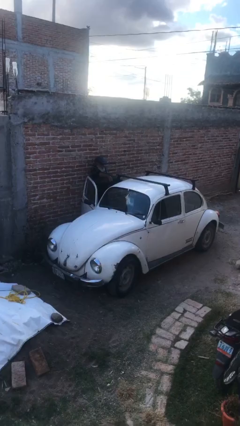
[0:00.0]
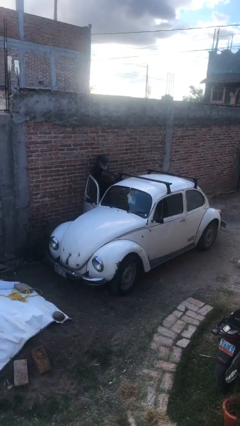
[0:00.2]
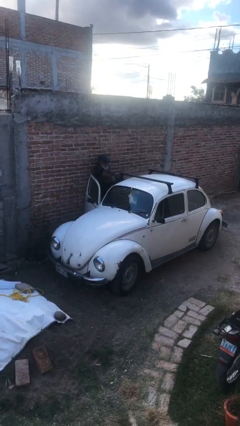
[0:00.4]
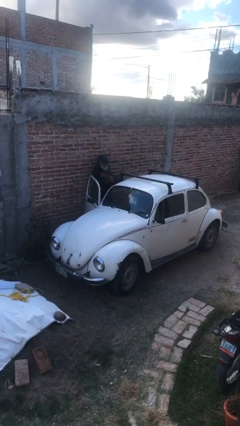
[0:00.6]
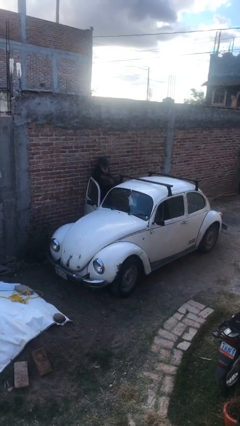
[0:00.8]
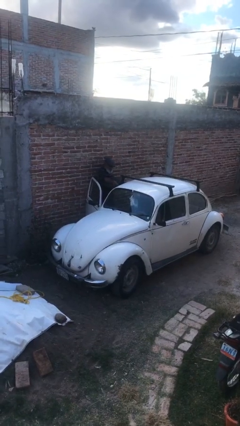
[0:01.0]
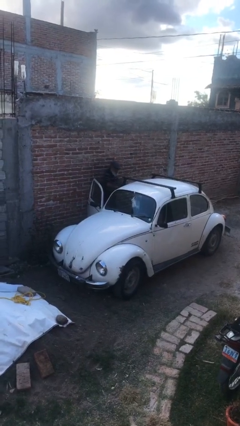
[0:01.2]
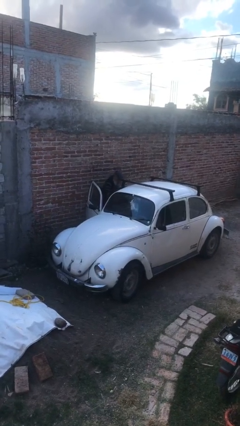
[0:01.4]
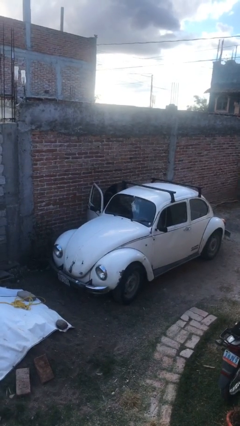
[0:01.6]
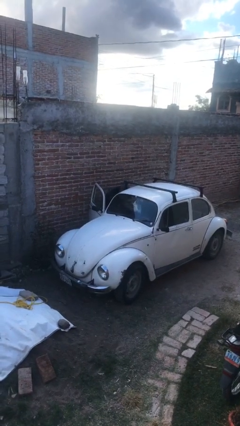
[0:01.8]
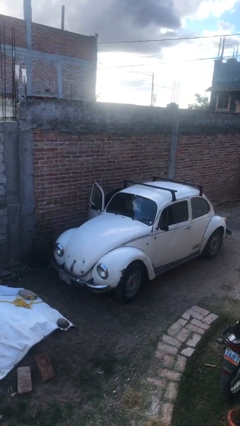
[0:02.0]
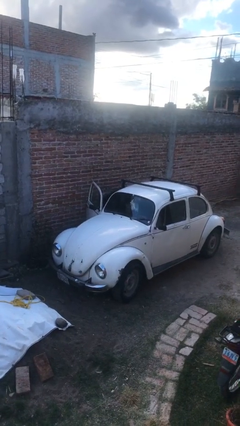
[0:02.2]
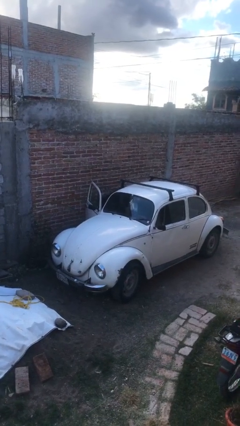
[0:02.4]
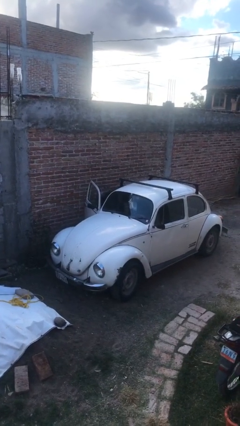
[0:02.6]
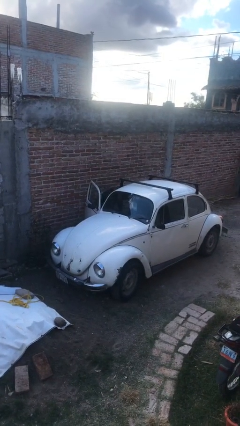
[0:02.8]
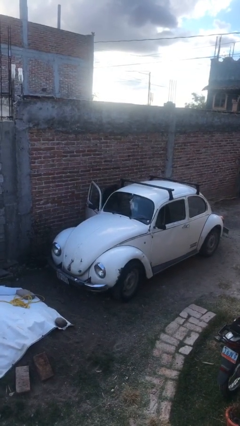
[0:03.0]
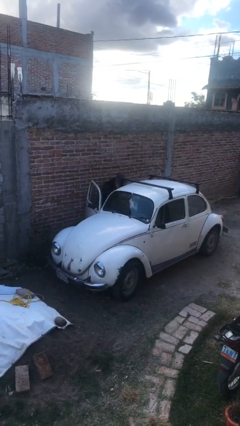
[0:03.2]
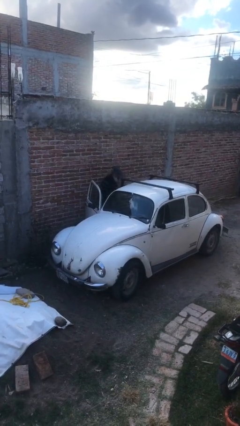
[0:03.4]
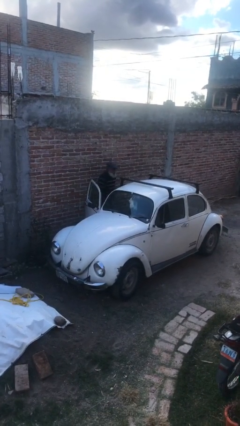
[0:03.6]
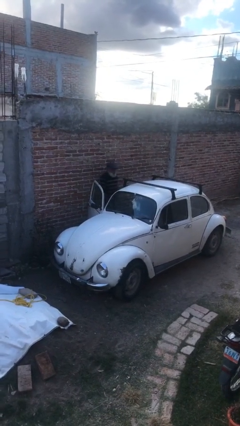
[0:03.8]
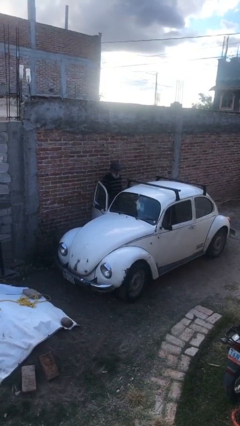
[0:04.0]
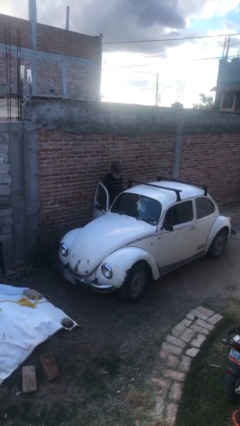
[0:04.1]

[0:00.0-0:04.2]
person loads car

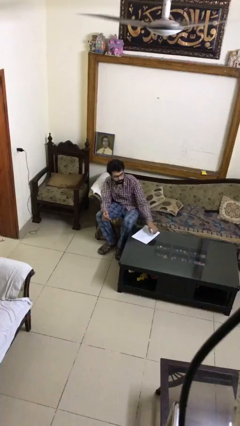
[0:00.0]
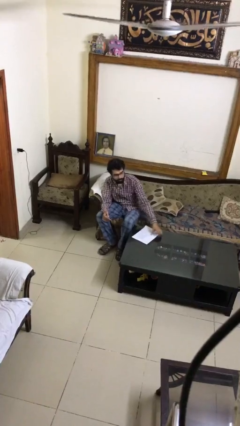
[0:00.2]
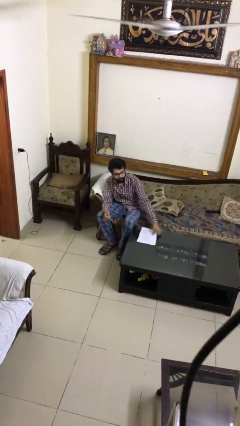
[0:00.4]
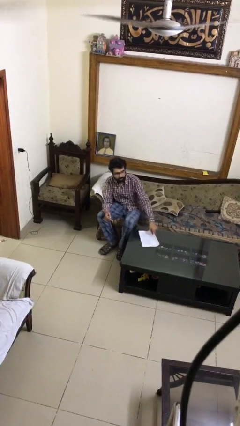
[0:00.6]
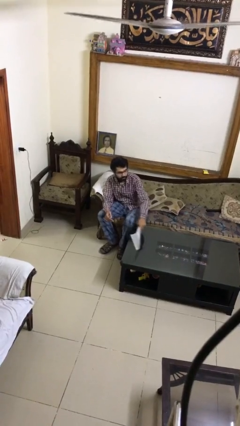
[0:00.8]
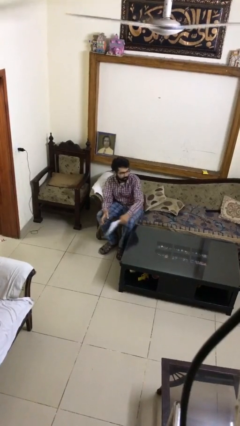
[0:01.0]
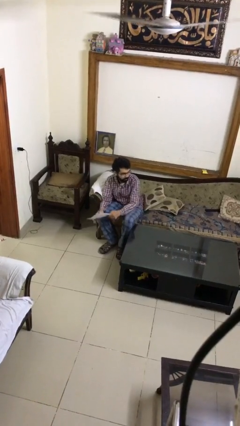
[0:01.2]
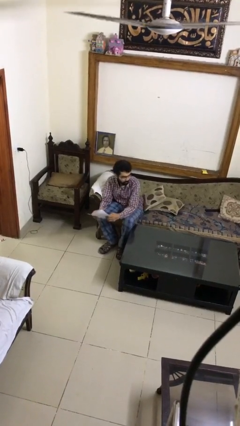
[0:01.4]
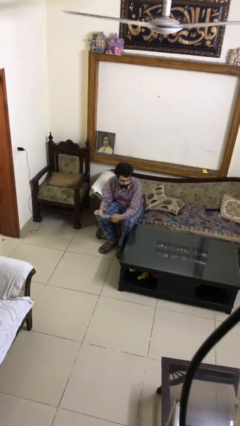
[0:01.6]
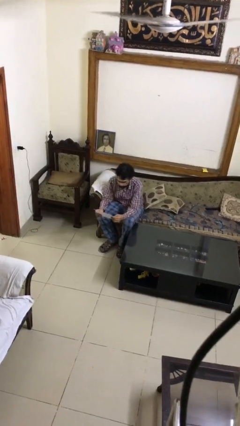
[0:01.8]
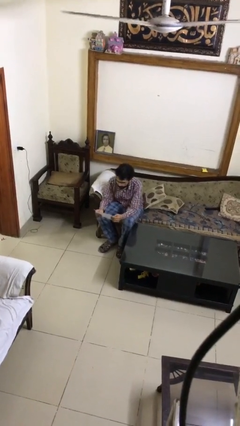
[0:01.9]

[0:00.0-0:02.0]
person picks up object from table

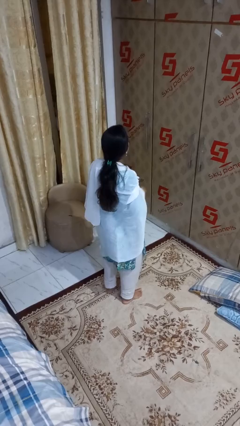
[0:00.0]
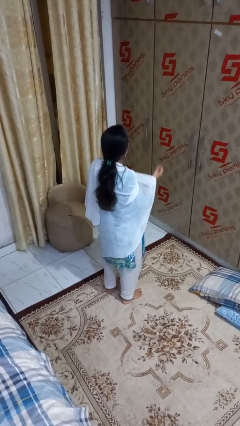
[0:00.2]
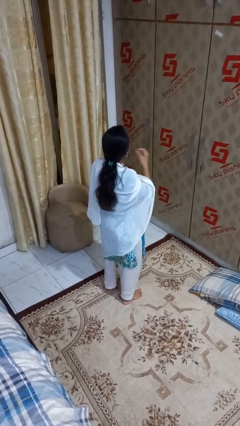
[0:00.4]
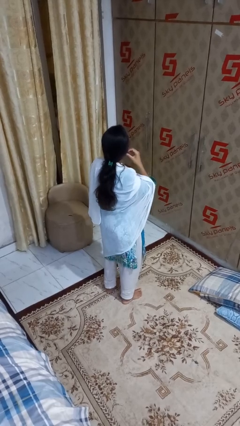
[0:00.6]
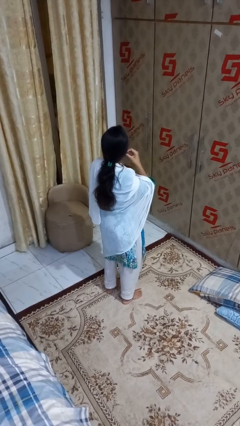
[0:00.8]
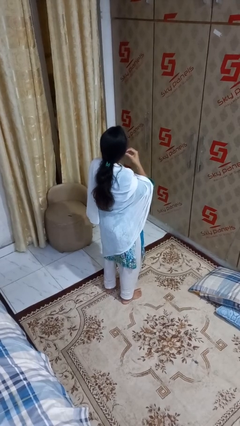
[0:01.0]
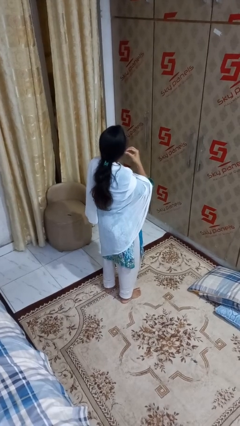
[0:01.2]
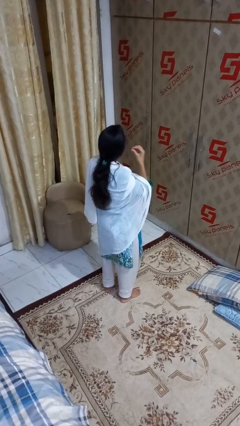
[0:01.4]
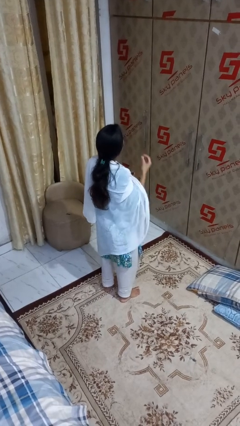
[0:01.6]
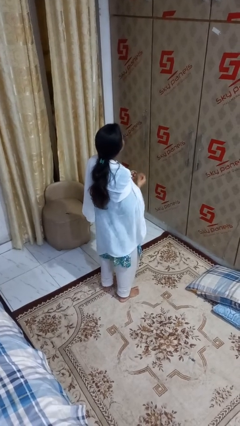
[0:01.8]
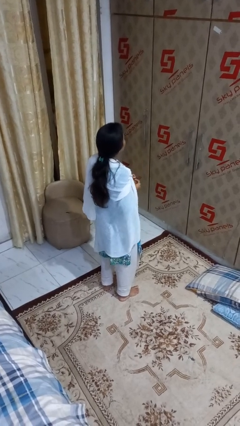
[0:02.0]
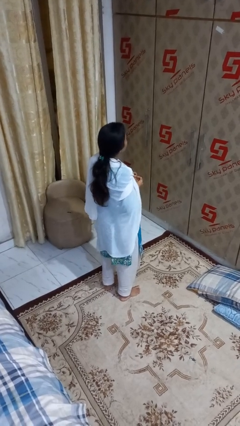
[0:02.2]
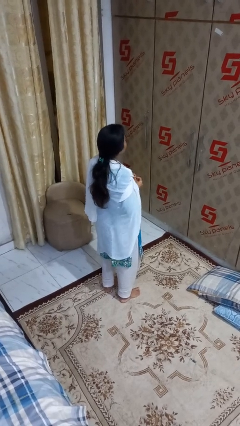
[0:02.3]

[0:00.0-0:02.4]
person takes off earrings

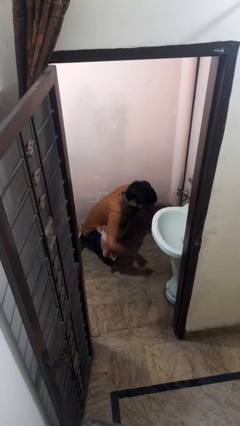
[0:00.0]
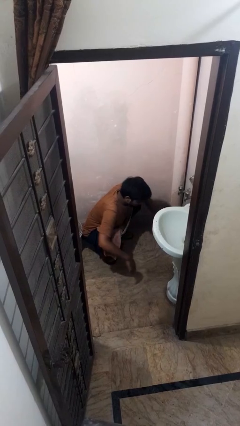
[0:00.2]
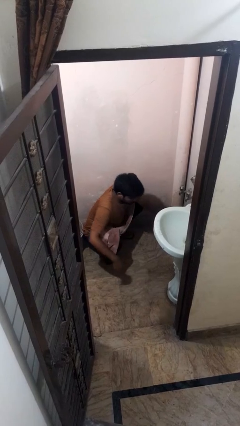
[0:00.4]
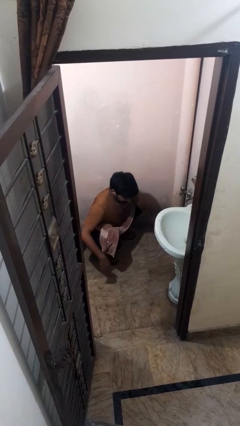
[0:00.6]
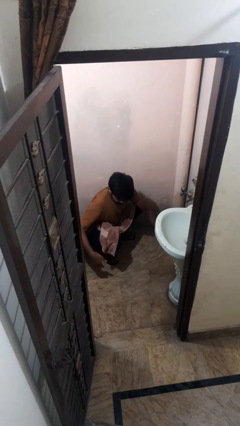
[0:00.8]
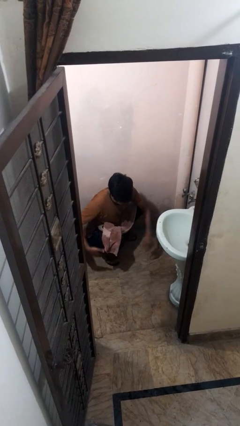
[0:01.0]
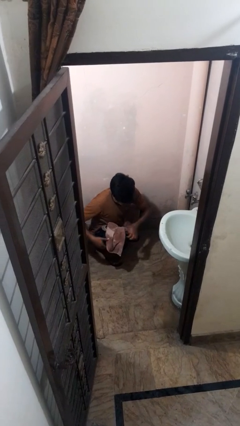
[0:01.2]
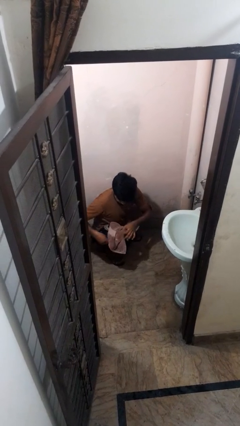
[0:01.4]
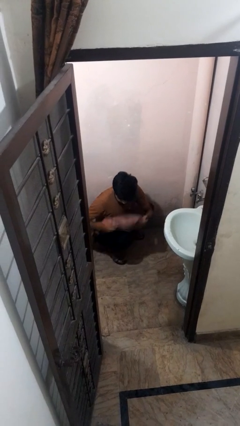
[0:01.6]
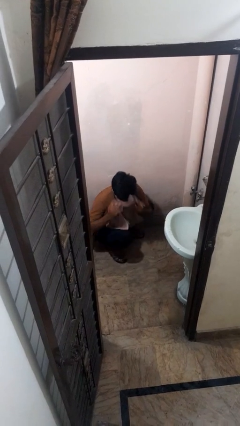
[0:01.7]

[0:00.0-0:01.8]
person throws object on bed

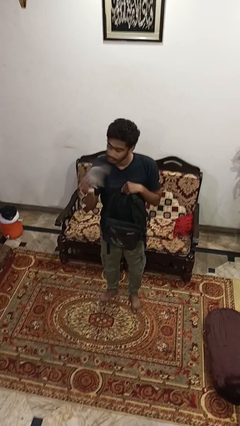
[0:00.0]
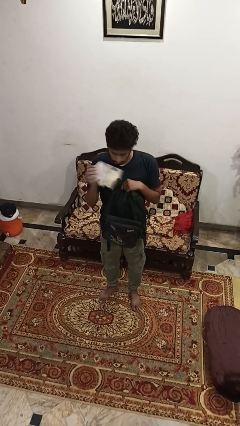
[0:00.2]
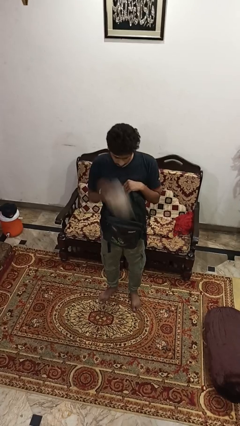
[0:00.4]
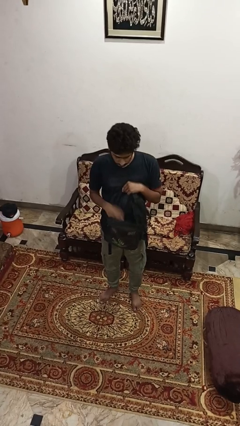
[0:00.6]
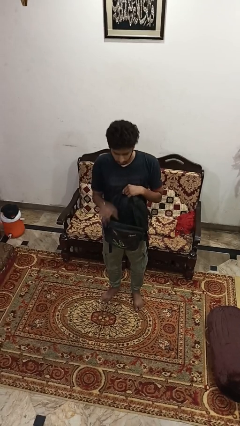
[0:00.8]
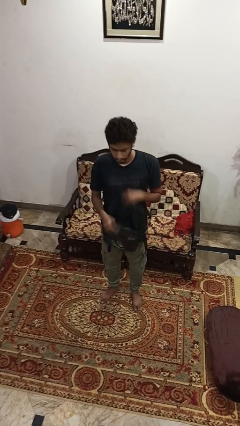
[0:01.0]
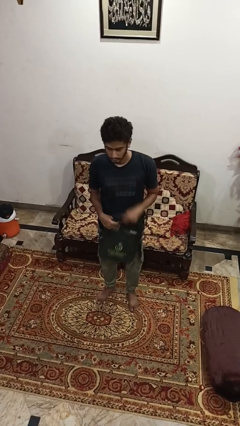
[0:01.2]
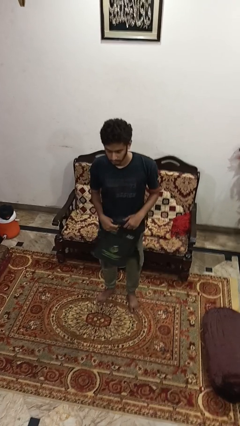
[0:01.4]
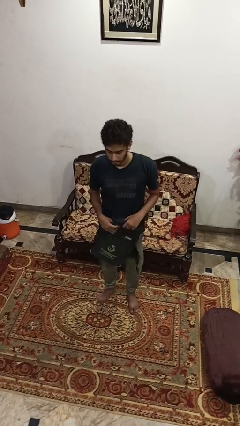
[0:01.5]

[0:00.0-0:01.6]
person puts object into backpack

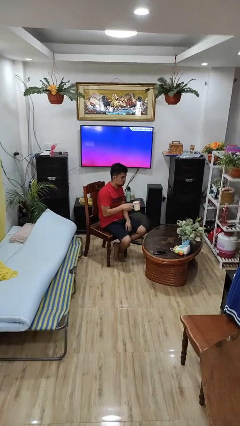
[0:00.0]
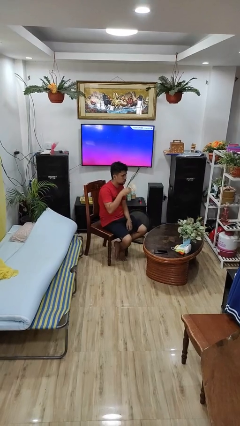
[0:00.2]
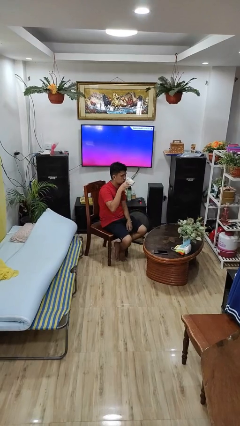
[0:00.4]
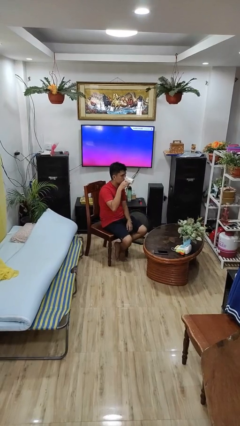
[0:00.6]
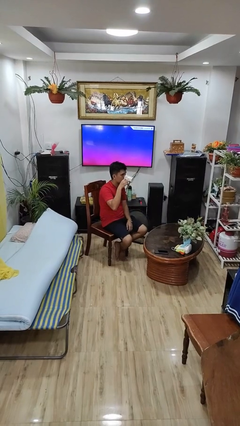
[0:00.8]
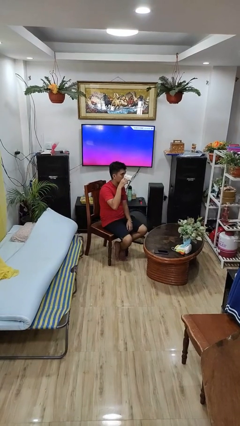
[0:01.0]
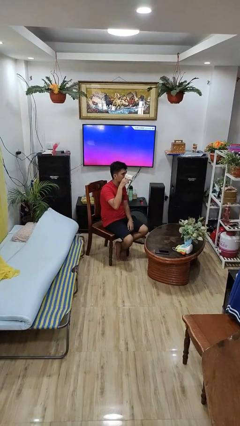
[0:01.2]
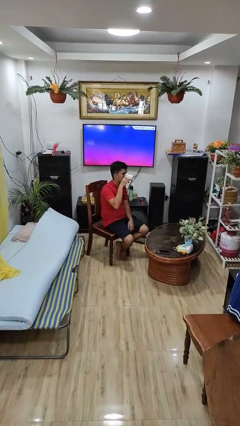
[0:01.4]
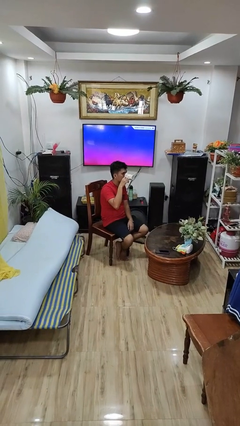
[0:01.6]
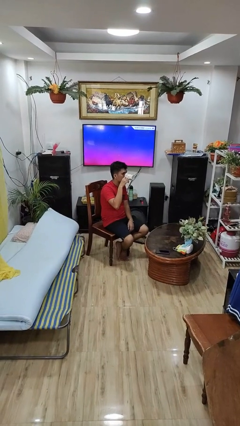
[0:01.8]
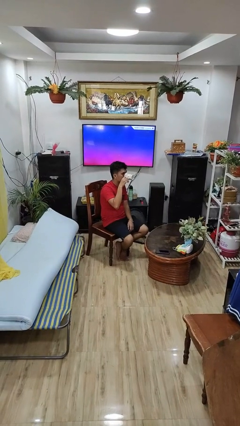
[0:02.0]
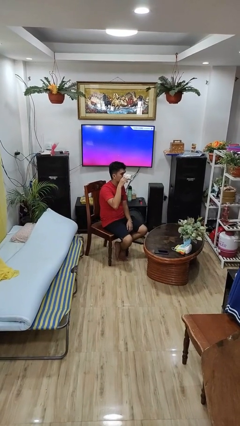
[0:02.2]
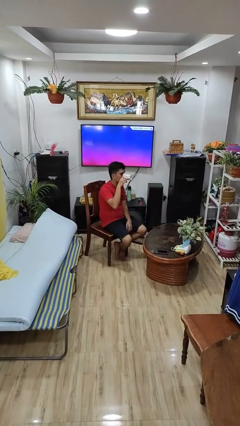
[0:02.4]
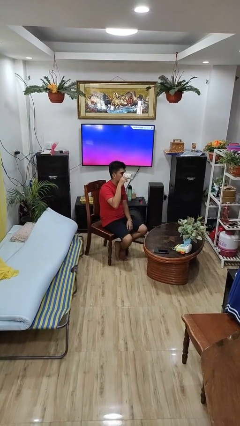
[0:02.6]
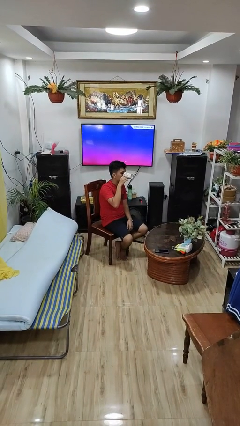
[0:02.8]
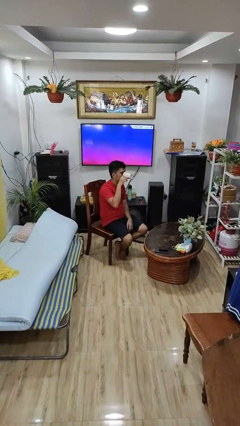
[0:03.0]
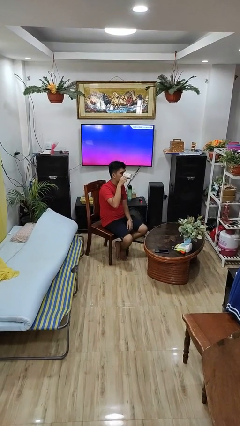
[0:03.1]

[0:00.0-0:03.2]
person drinks from mug

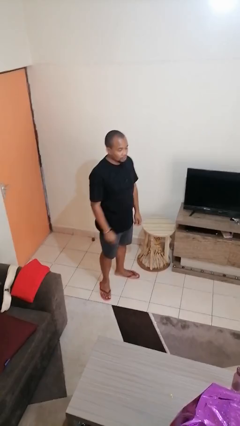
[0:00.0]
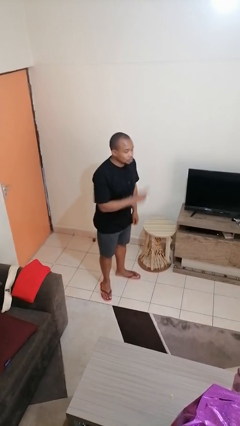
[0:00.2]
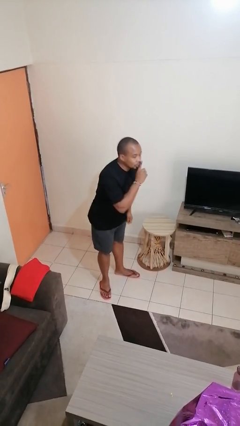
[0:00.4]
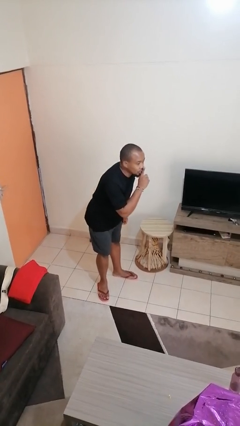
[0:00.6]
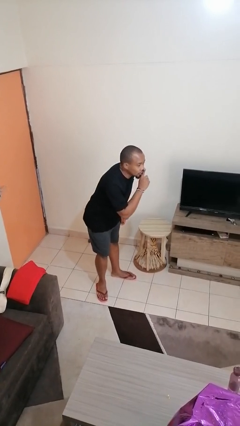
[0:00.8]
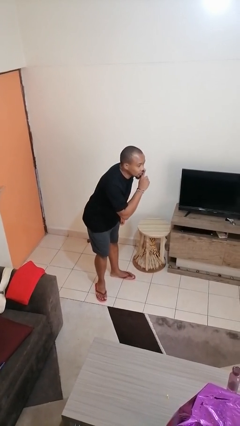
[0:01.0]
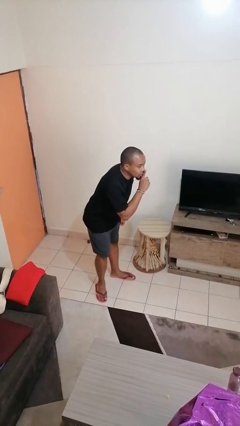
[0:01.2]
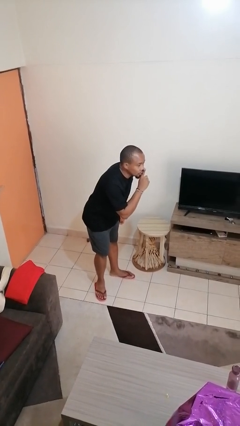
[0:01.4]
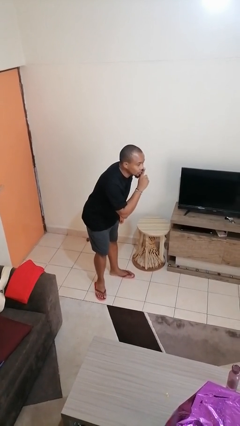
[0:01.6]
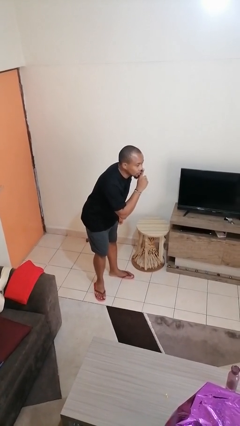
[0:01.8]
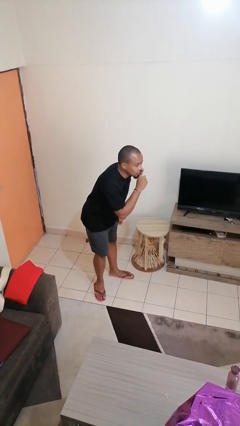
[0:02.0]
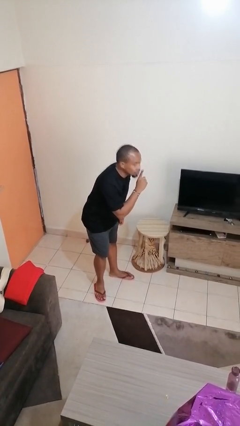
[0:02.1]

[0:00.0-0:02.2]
person gestures be quiet
